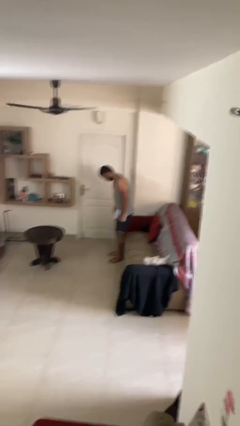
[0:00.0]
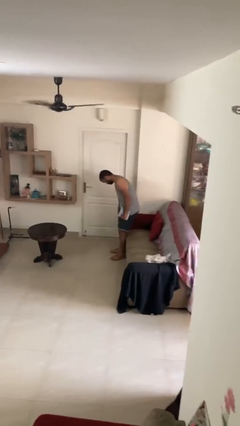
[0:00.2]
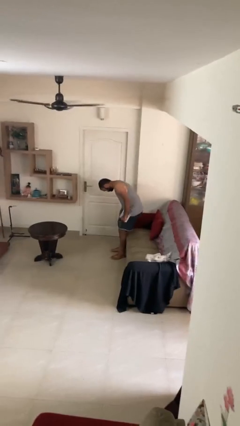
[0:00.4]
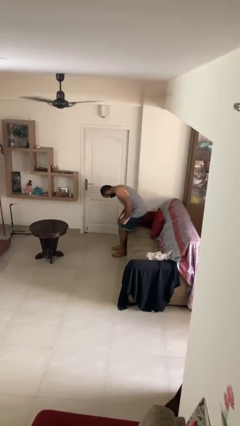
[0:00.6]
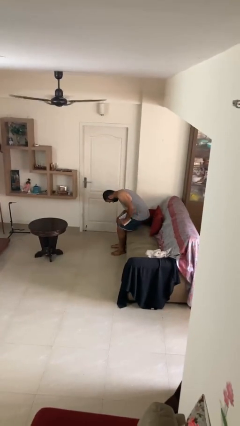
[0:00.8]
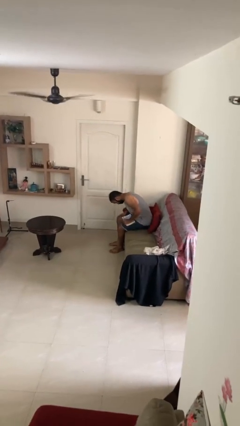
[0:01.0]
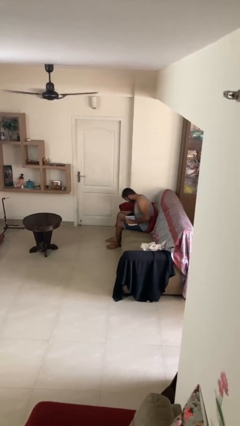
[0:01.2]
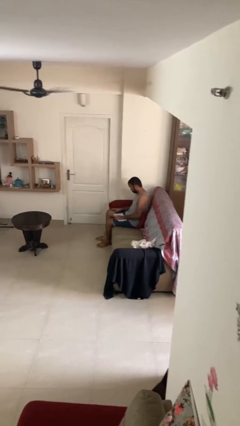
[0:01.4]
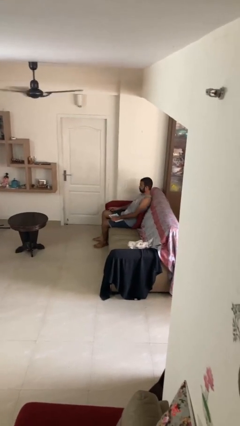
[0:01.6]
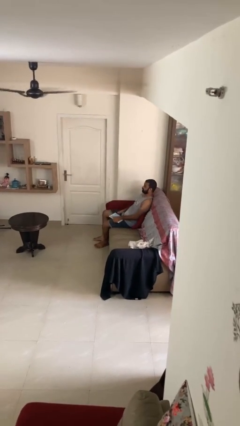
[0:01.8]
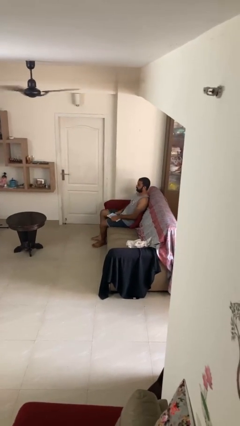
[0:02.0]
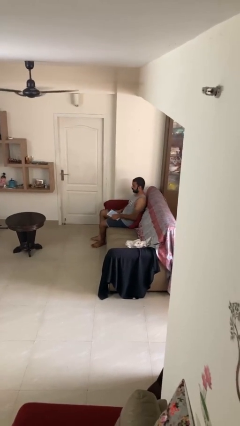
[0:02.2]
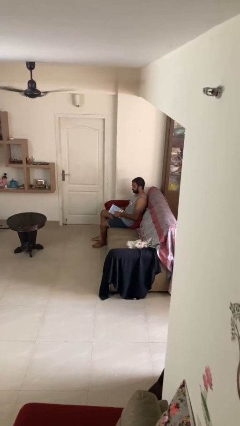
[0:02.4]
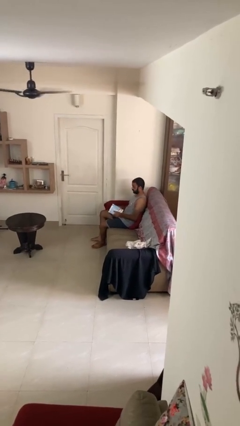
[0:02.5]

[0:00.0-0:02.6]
person sits down

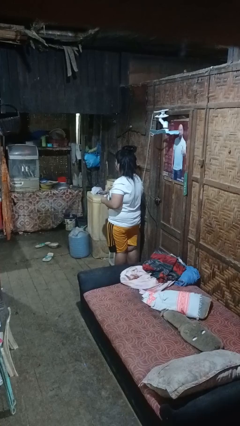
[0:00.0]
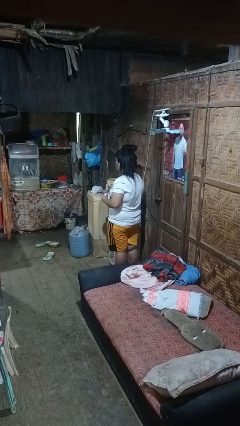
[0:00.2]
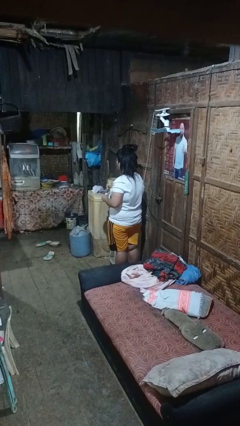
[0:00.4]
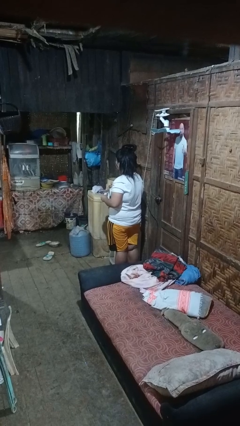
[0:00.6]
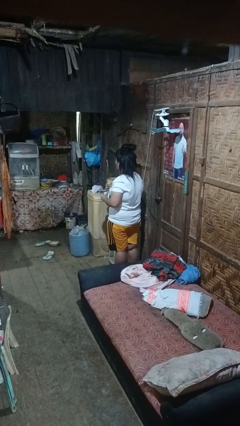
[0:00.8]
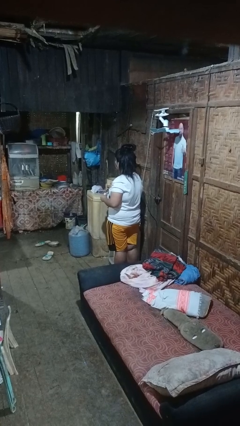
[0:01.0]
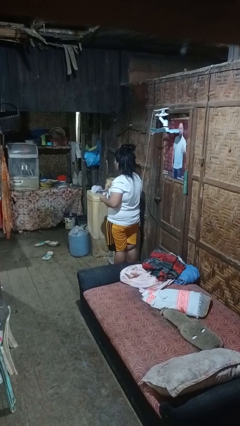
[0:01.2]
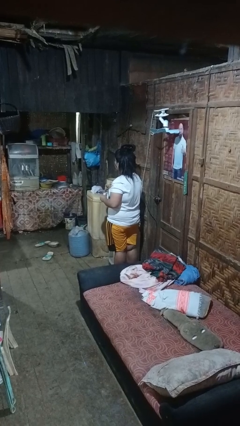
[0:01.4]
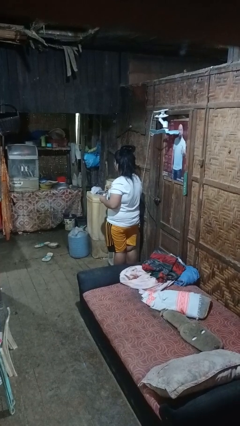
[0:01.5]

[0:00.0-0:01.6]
person stirs mug

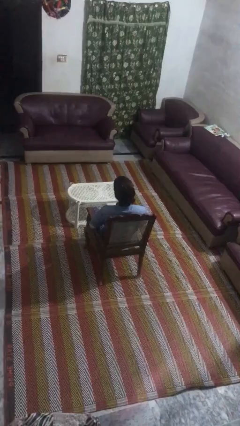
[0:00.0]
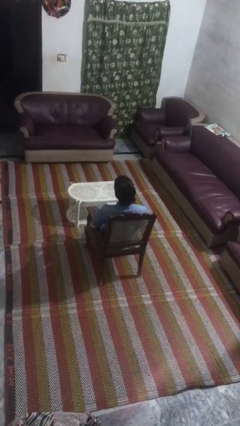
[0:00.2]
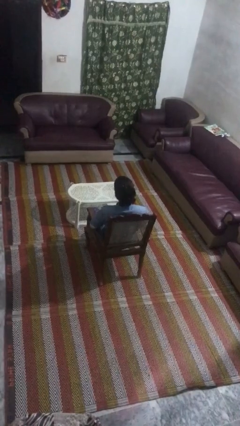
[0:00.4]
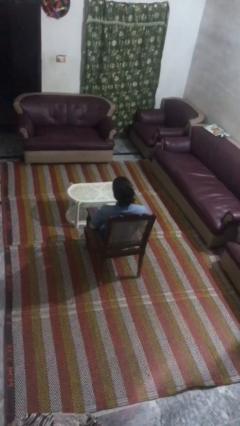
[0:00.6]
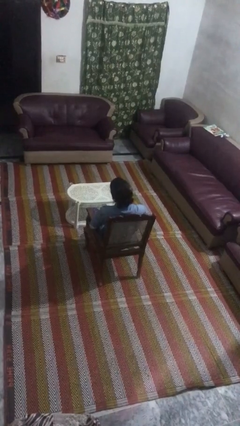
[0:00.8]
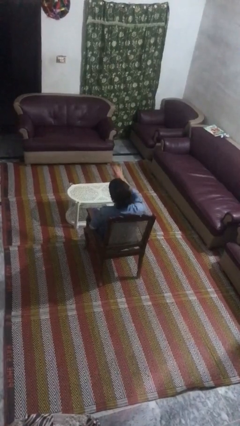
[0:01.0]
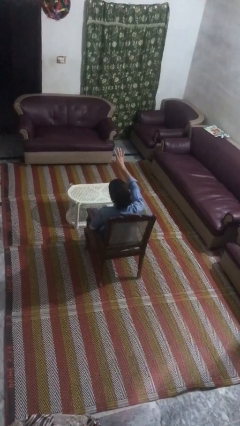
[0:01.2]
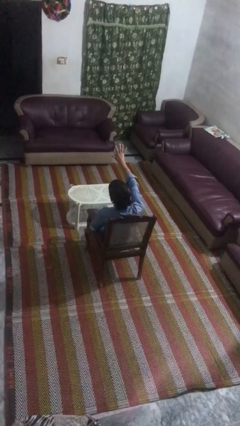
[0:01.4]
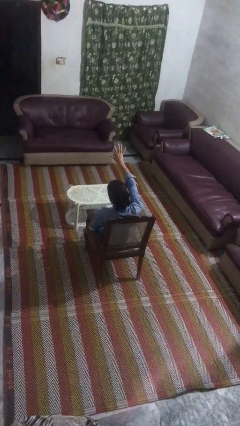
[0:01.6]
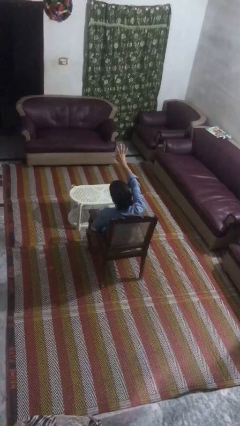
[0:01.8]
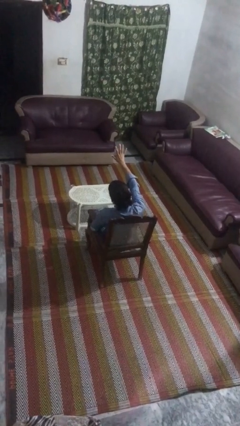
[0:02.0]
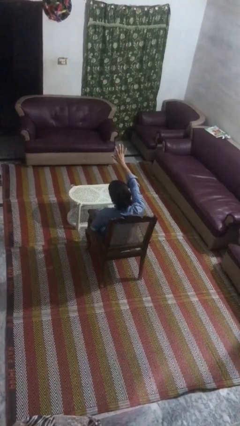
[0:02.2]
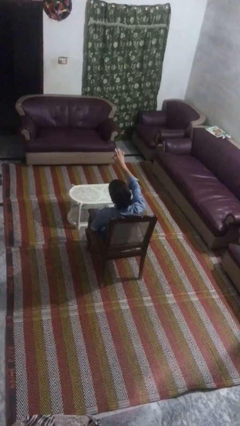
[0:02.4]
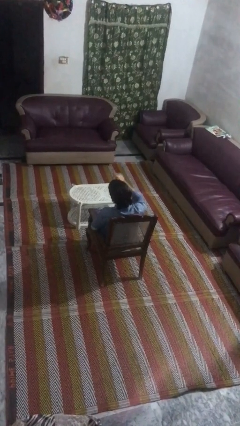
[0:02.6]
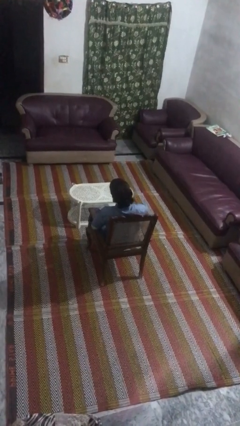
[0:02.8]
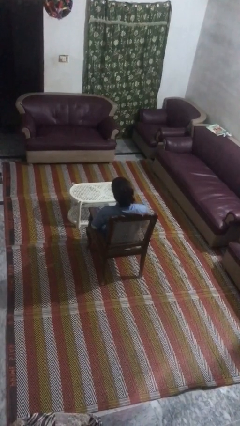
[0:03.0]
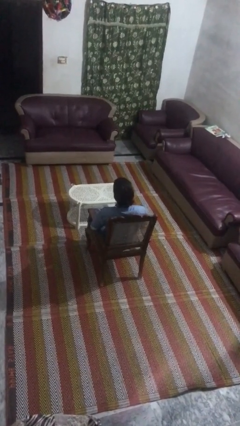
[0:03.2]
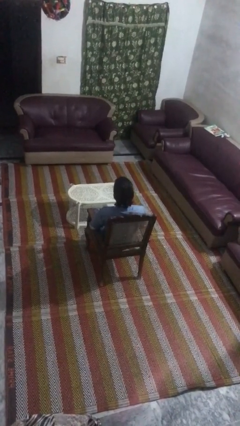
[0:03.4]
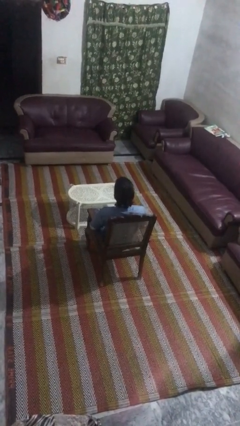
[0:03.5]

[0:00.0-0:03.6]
person gestures number five

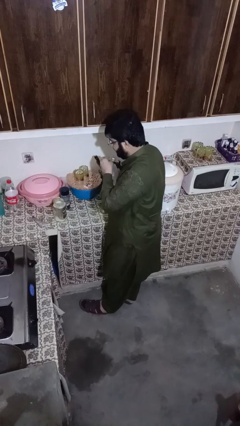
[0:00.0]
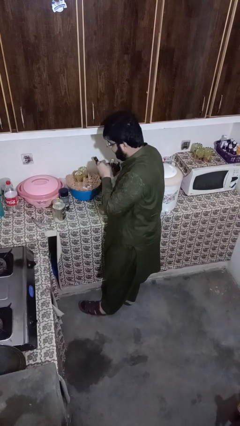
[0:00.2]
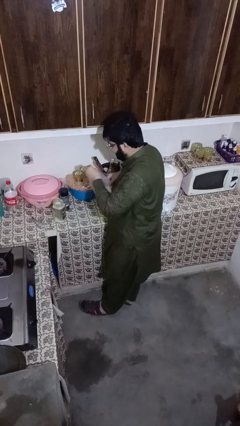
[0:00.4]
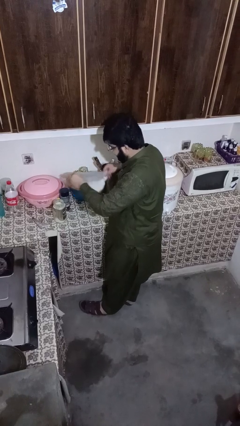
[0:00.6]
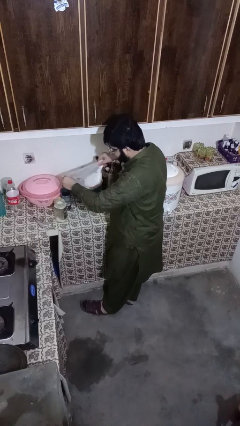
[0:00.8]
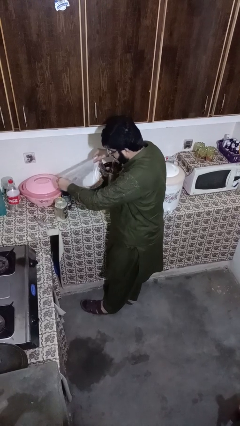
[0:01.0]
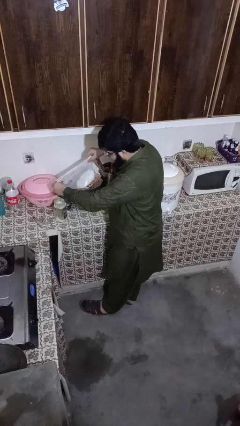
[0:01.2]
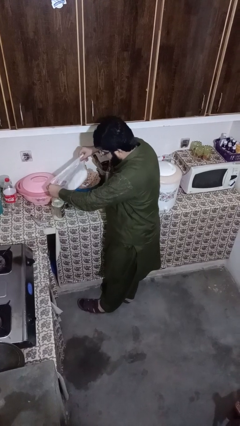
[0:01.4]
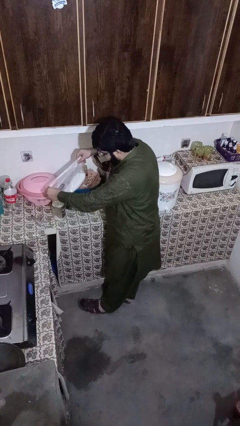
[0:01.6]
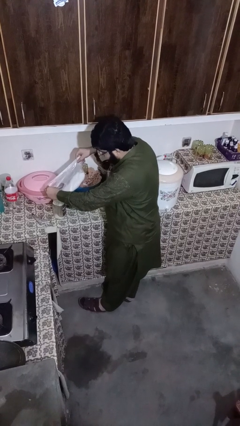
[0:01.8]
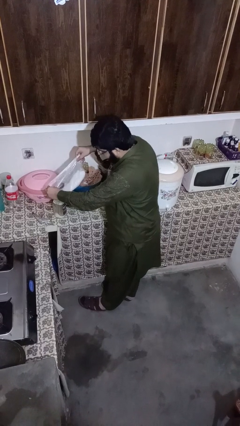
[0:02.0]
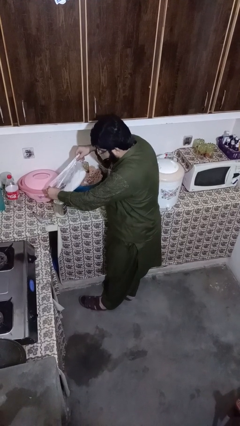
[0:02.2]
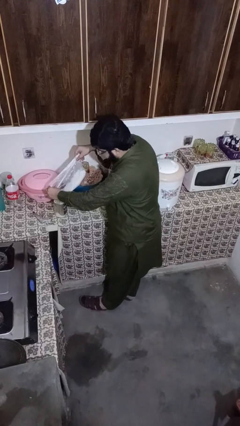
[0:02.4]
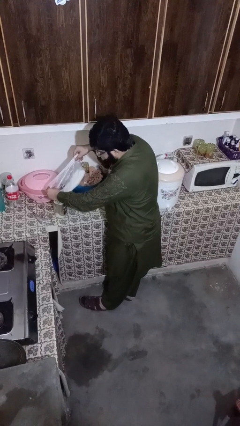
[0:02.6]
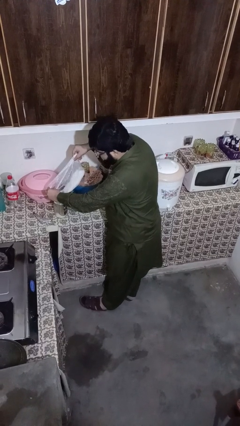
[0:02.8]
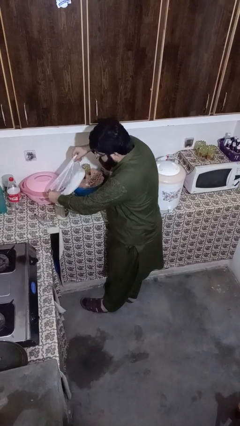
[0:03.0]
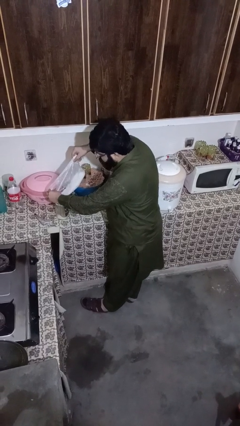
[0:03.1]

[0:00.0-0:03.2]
person pours into bowl

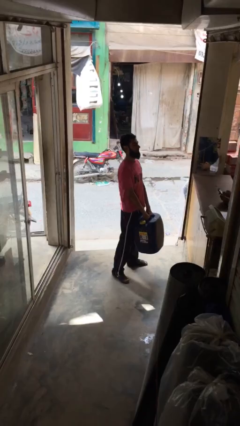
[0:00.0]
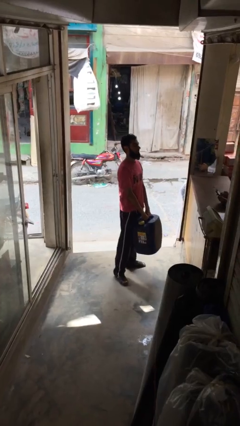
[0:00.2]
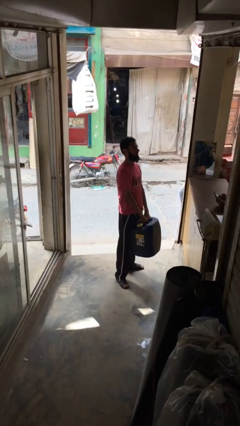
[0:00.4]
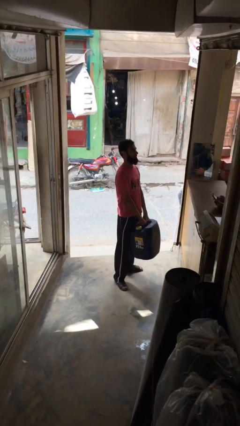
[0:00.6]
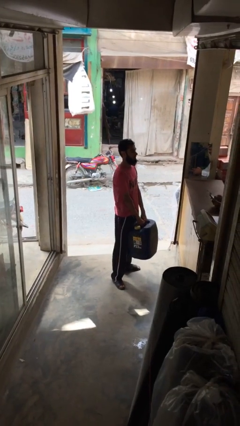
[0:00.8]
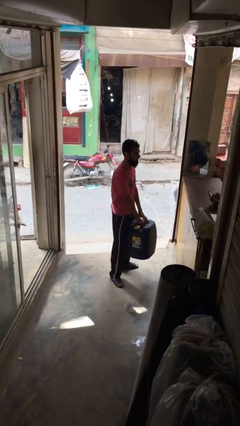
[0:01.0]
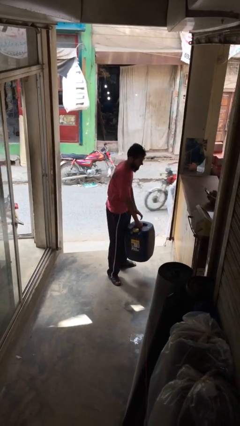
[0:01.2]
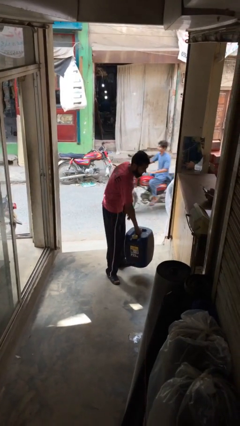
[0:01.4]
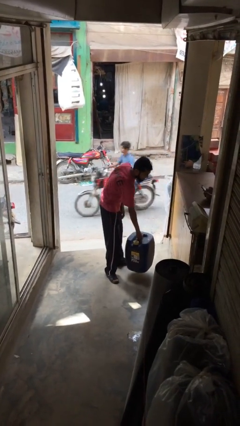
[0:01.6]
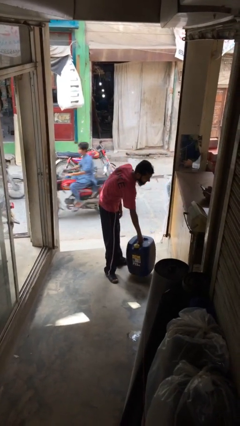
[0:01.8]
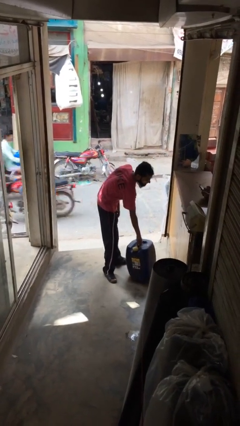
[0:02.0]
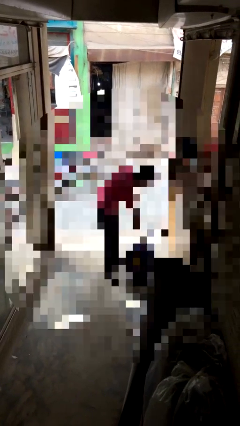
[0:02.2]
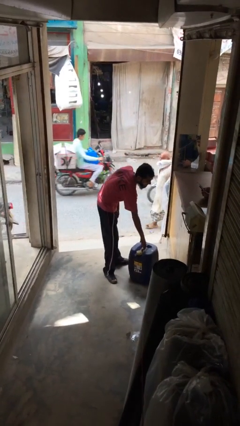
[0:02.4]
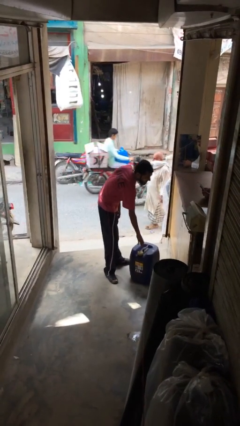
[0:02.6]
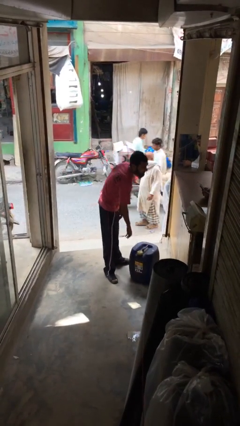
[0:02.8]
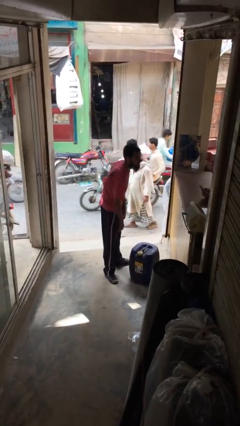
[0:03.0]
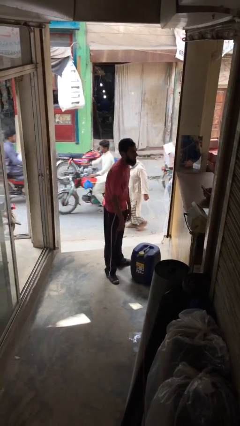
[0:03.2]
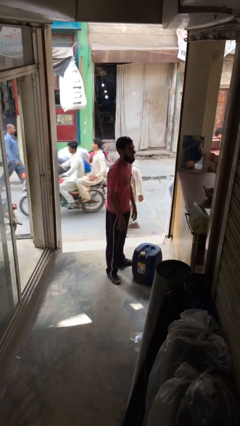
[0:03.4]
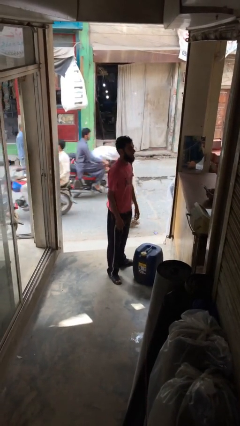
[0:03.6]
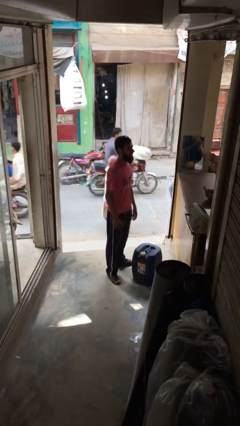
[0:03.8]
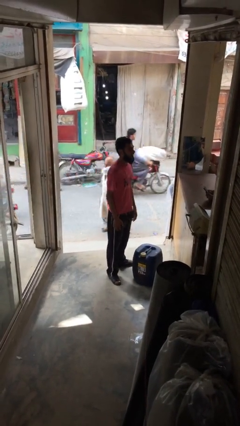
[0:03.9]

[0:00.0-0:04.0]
person puts down object on floor

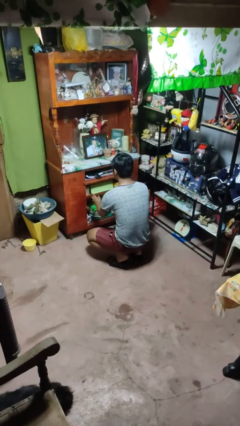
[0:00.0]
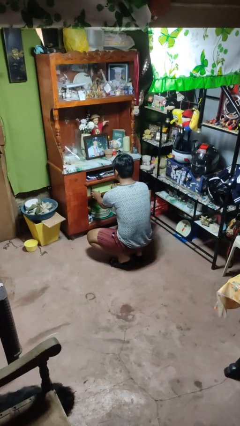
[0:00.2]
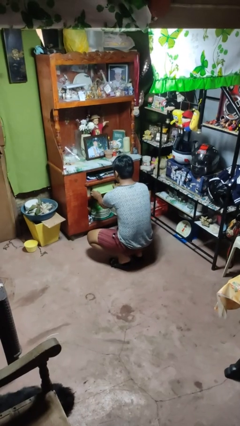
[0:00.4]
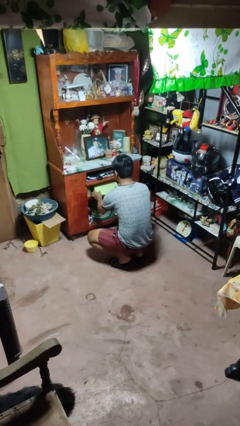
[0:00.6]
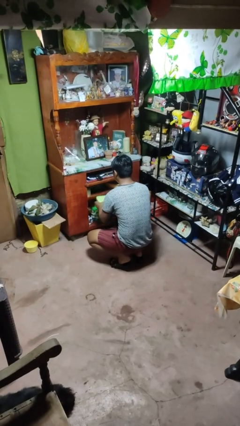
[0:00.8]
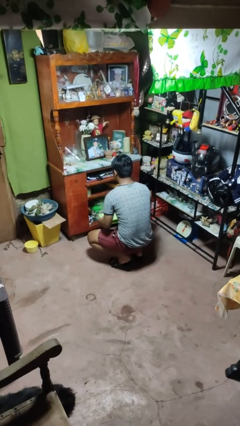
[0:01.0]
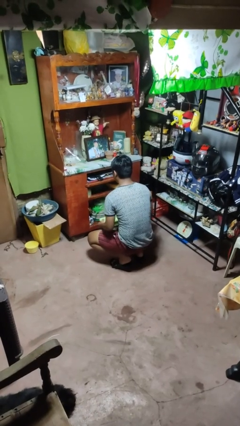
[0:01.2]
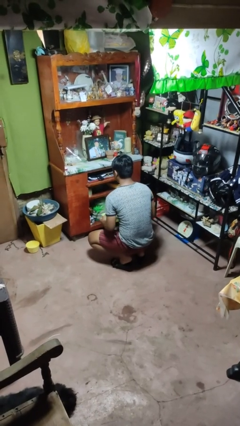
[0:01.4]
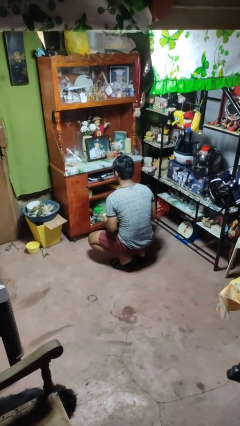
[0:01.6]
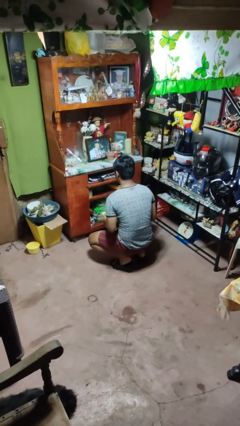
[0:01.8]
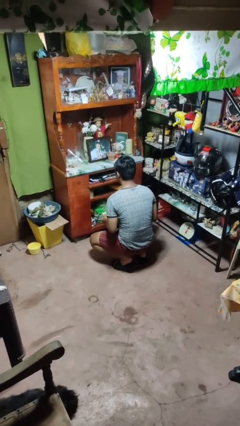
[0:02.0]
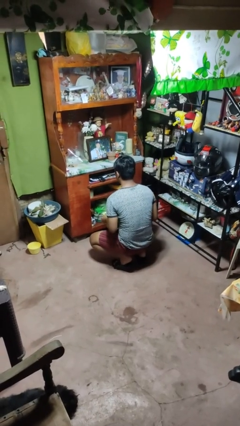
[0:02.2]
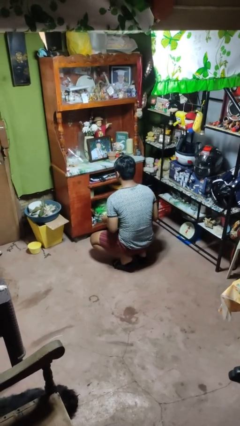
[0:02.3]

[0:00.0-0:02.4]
person picks up object from cabinet
